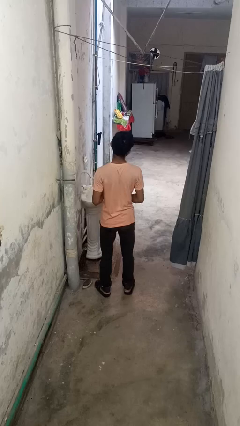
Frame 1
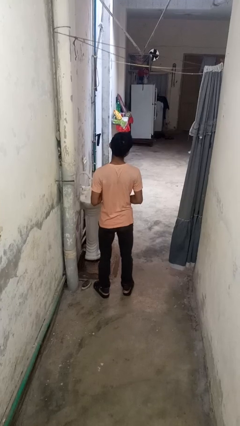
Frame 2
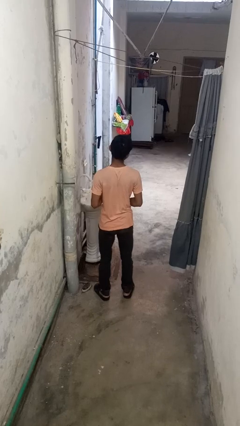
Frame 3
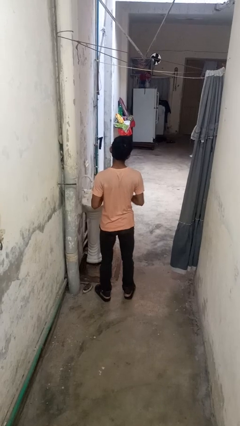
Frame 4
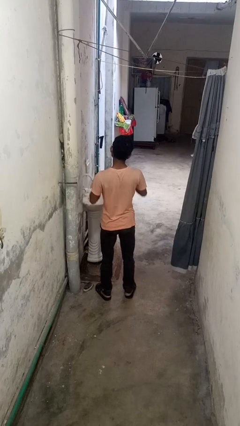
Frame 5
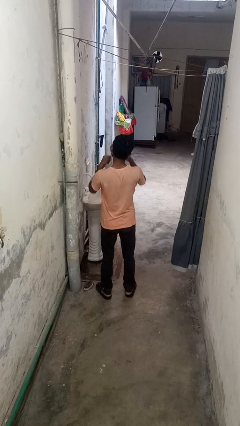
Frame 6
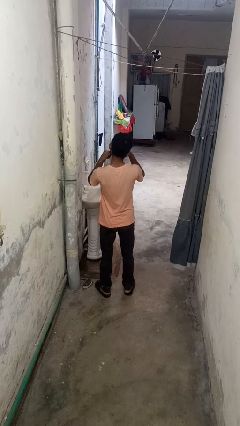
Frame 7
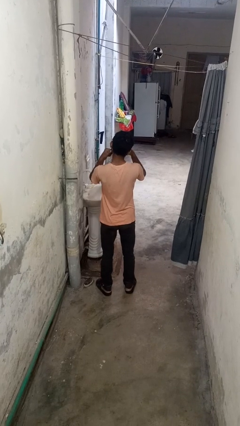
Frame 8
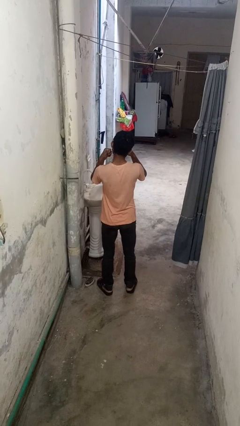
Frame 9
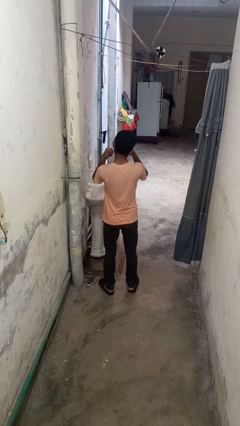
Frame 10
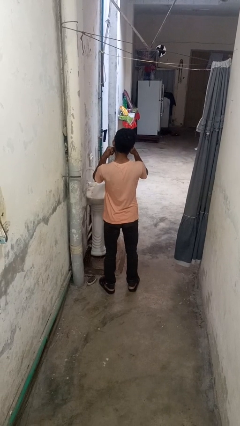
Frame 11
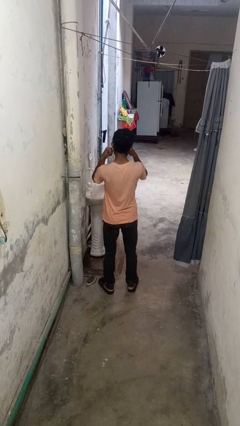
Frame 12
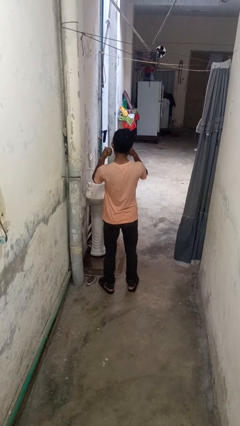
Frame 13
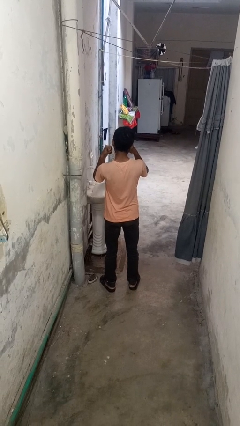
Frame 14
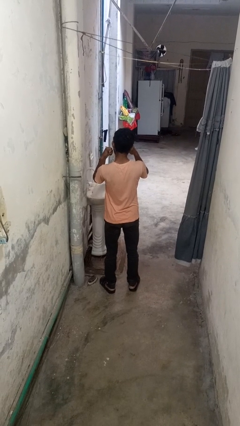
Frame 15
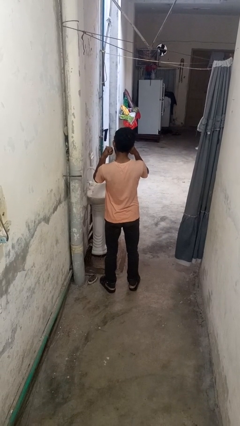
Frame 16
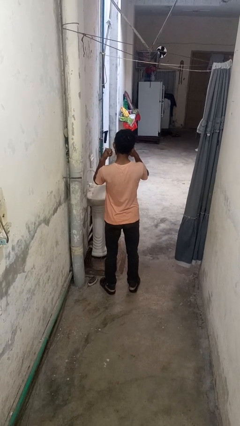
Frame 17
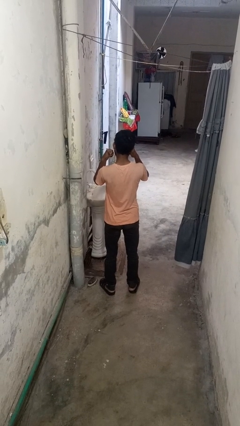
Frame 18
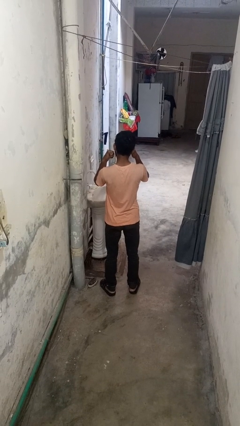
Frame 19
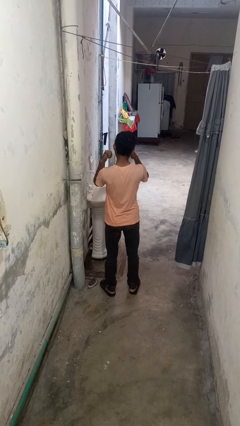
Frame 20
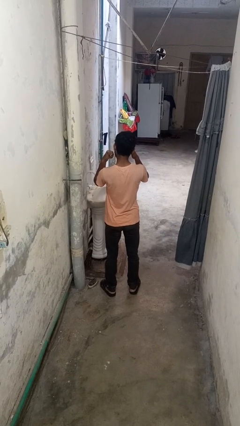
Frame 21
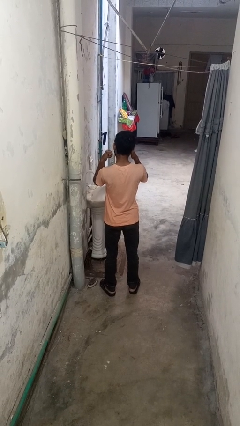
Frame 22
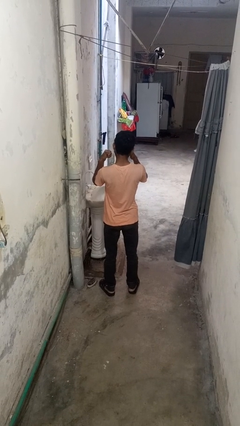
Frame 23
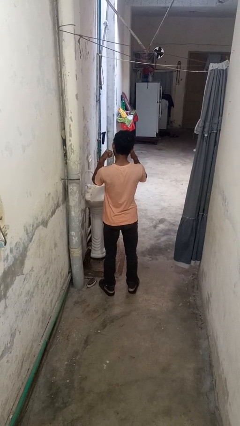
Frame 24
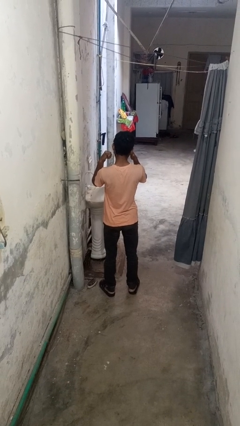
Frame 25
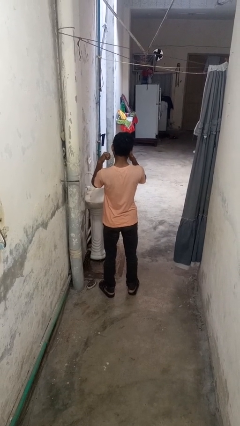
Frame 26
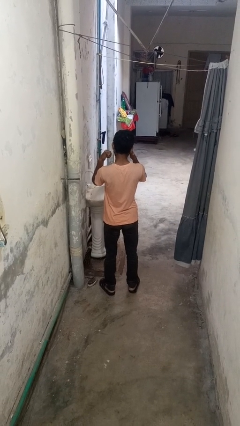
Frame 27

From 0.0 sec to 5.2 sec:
person flosses

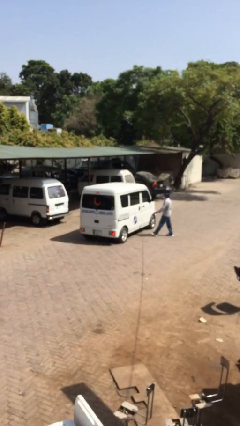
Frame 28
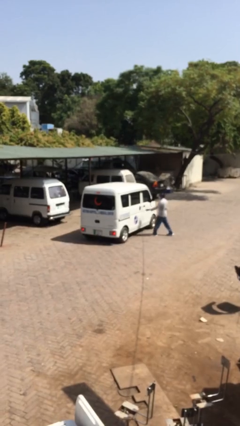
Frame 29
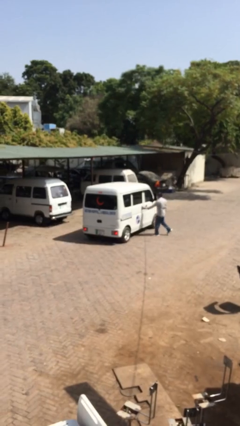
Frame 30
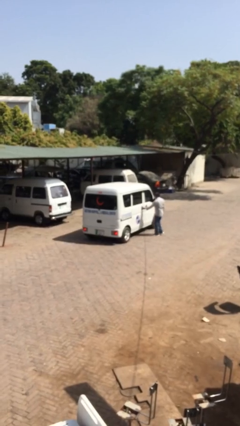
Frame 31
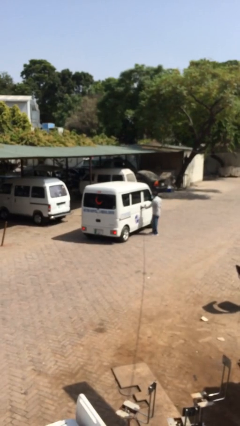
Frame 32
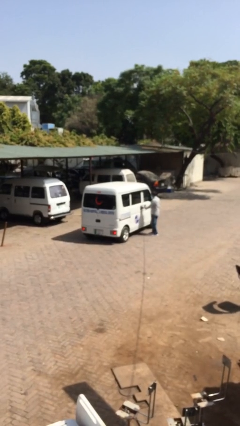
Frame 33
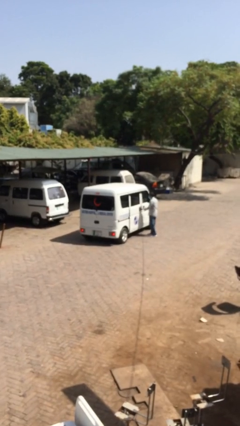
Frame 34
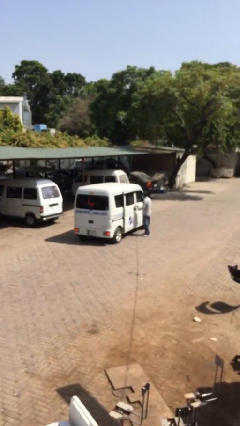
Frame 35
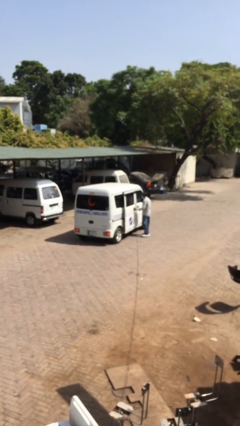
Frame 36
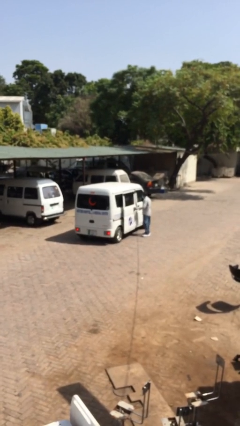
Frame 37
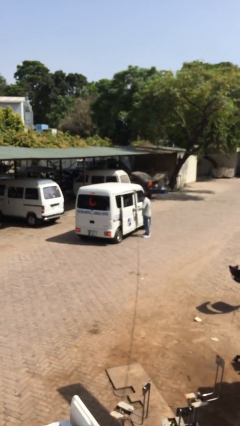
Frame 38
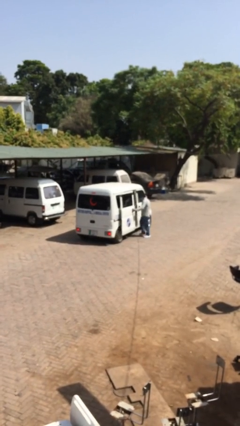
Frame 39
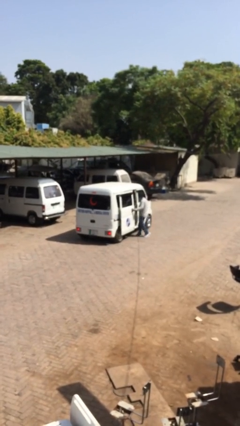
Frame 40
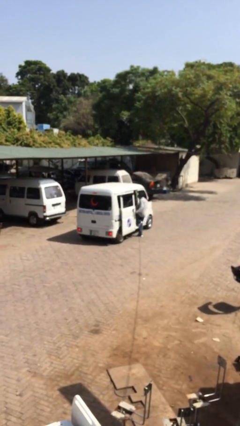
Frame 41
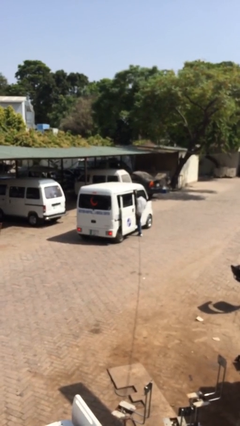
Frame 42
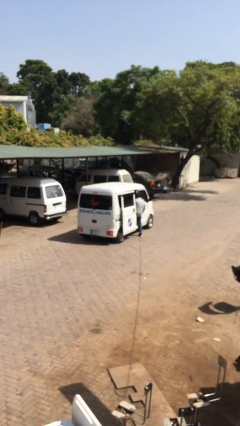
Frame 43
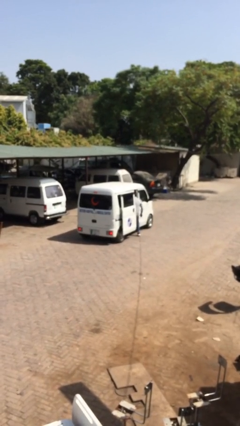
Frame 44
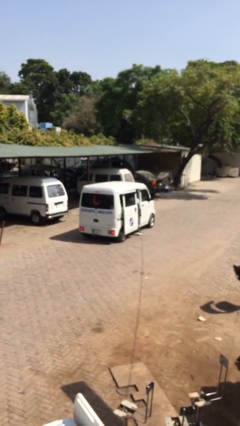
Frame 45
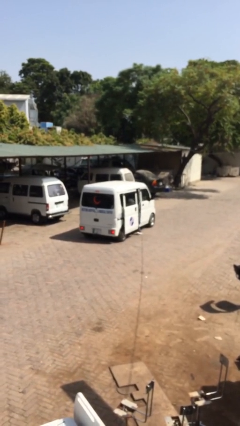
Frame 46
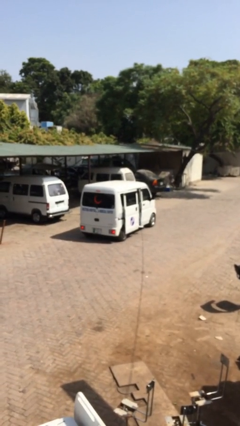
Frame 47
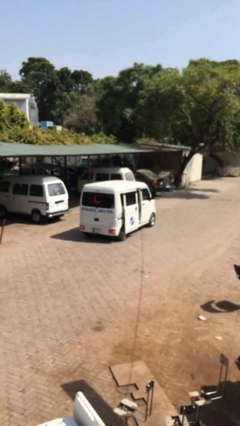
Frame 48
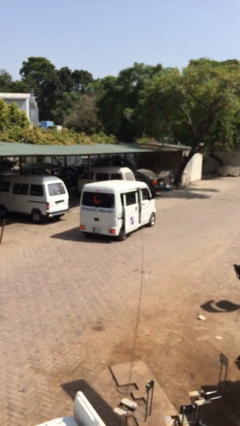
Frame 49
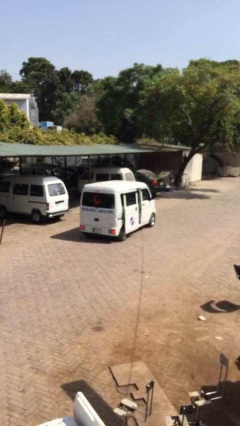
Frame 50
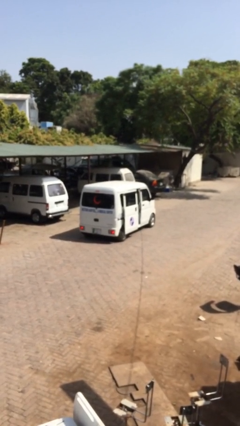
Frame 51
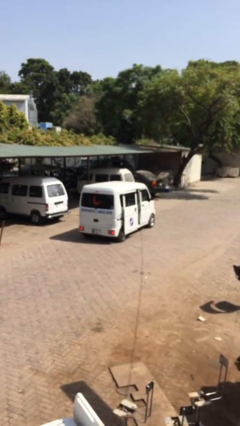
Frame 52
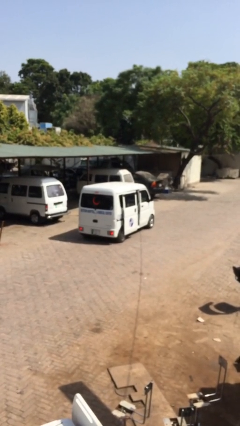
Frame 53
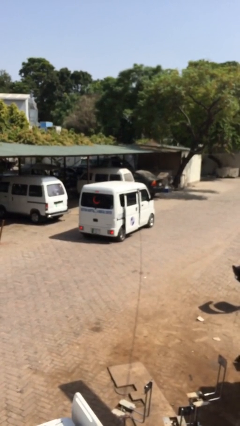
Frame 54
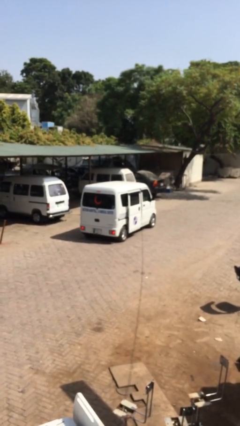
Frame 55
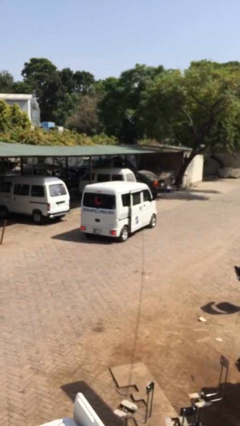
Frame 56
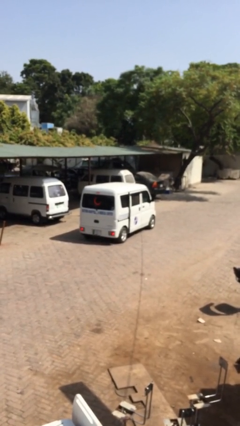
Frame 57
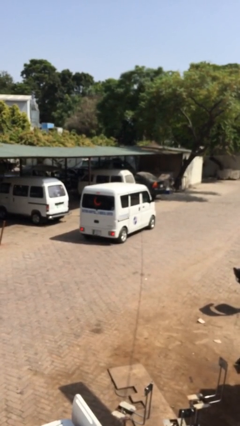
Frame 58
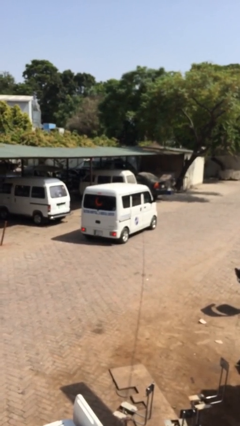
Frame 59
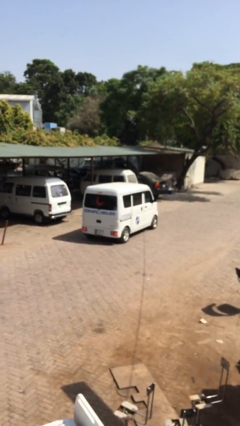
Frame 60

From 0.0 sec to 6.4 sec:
car picks up person

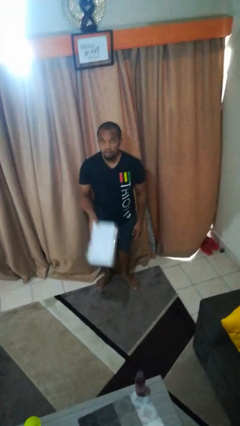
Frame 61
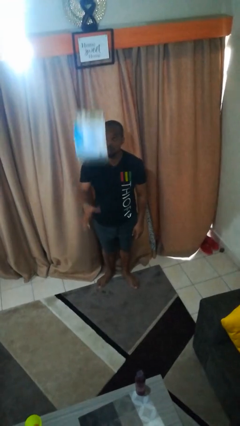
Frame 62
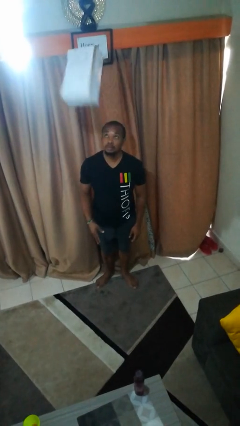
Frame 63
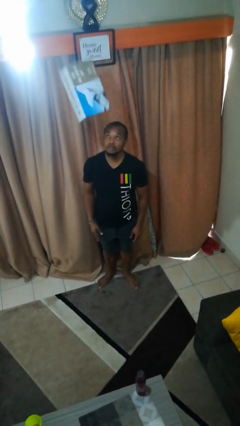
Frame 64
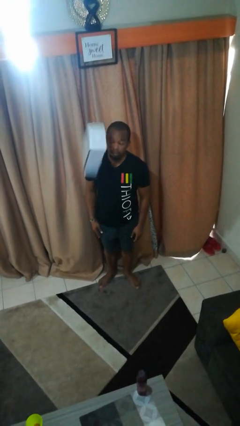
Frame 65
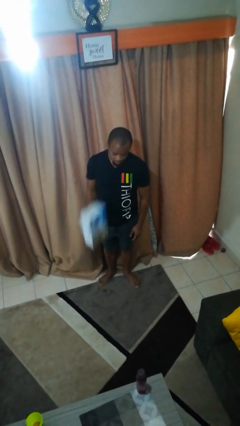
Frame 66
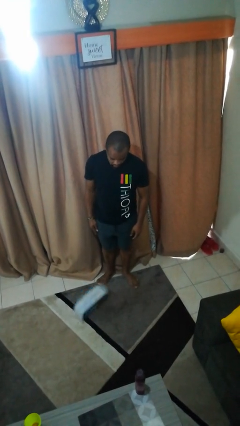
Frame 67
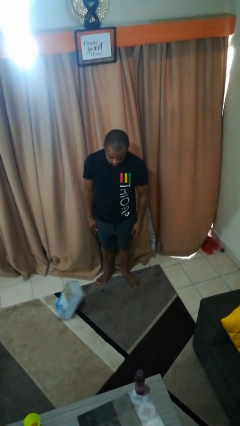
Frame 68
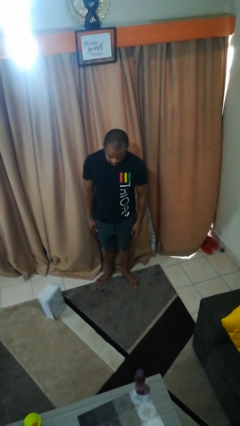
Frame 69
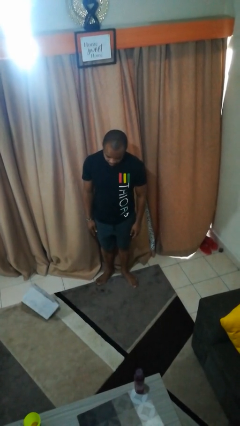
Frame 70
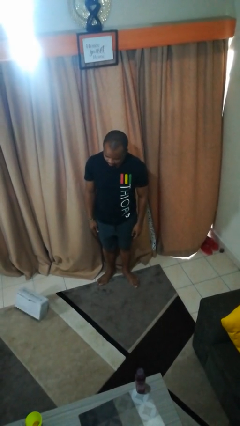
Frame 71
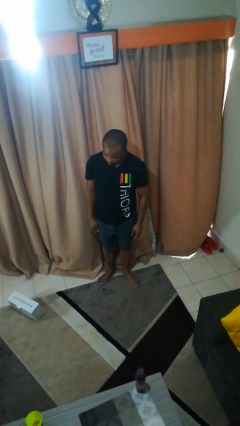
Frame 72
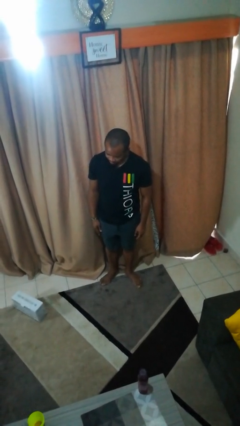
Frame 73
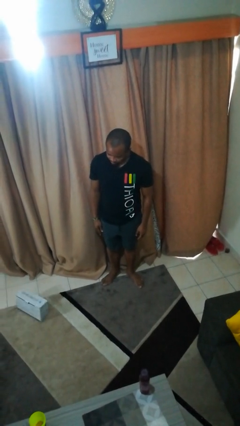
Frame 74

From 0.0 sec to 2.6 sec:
person throws object into air

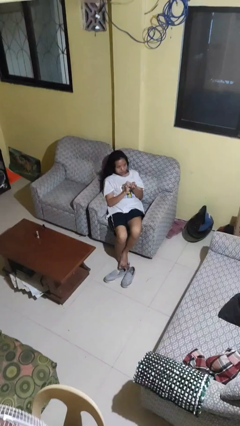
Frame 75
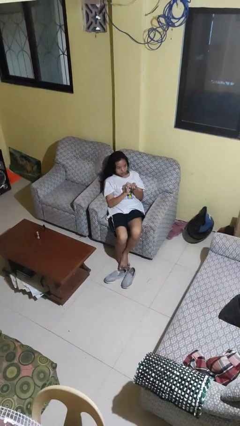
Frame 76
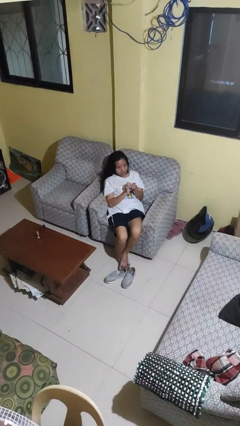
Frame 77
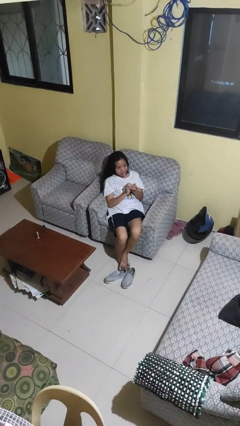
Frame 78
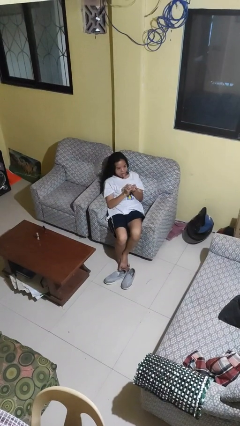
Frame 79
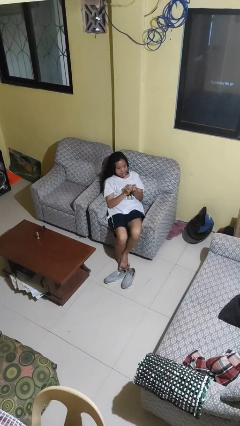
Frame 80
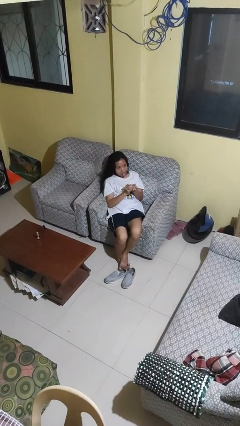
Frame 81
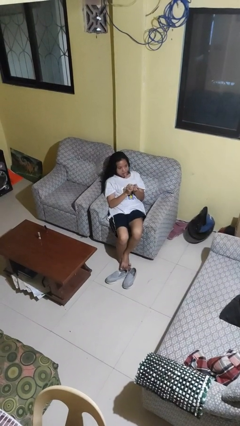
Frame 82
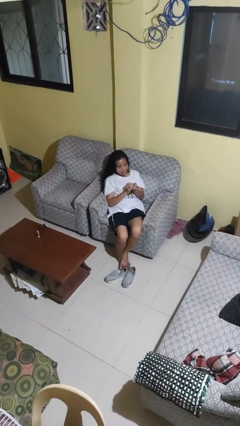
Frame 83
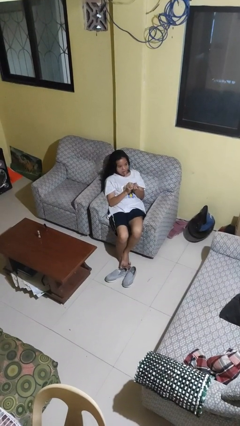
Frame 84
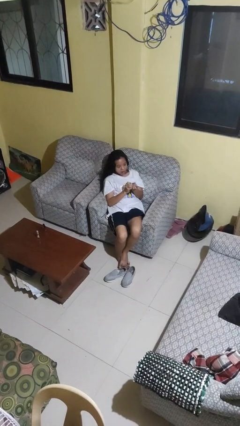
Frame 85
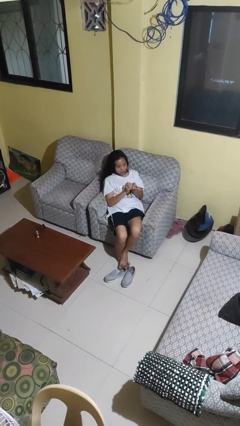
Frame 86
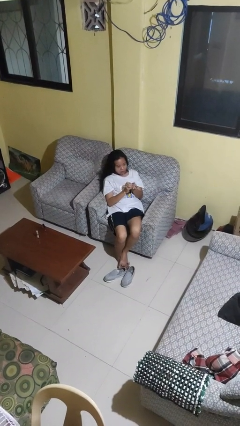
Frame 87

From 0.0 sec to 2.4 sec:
person sticks out tongue

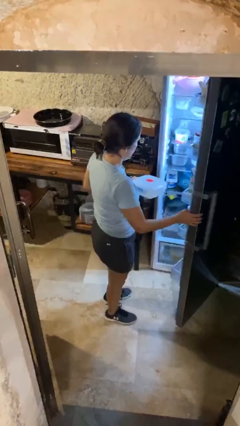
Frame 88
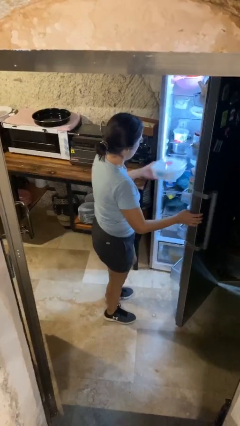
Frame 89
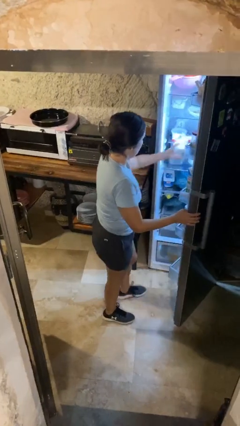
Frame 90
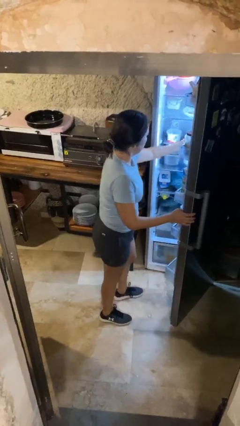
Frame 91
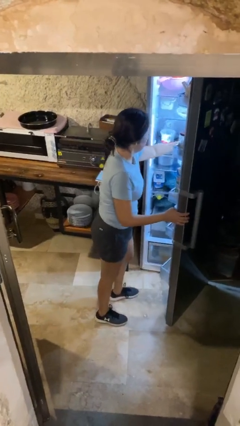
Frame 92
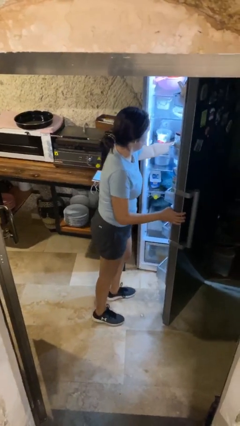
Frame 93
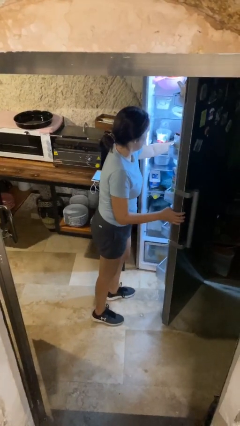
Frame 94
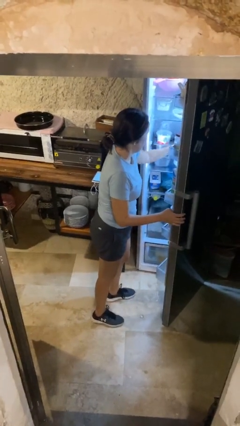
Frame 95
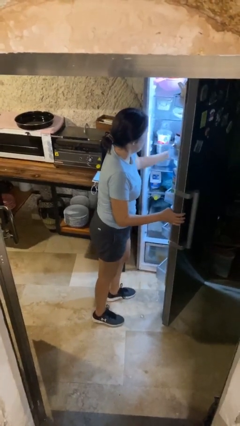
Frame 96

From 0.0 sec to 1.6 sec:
person puts object into refrigerator
